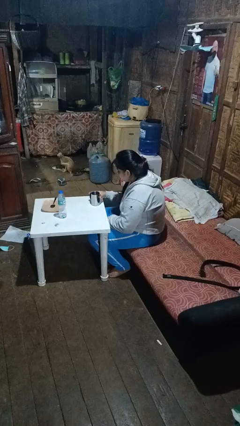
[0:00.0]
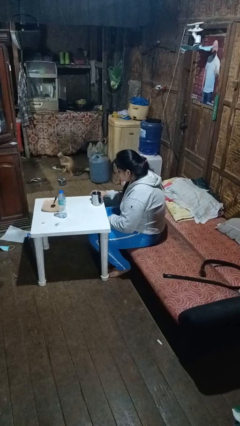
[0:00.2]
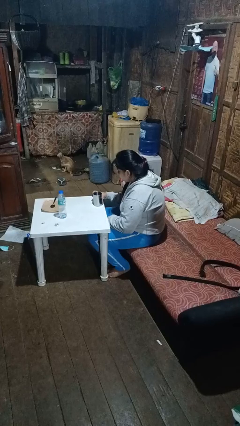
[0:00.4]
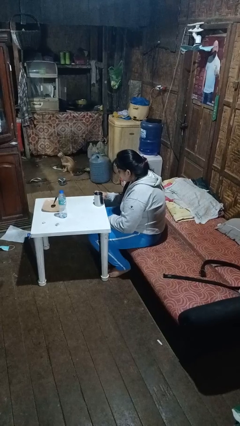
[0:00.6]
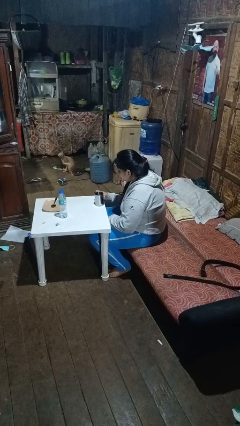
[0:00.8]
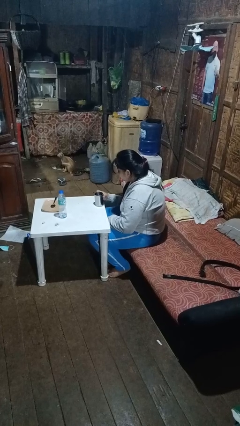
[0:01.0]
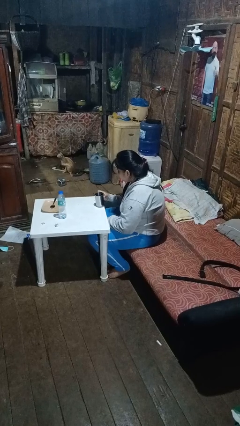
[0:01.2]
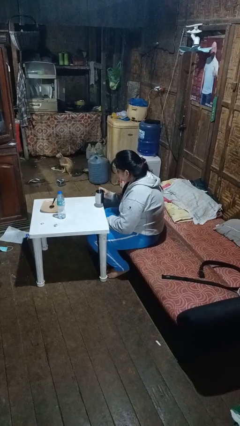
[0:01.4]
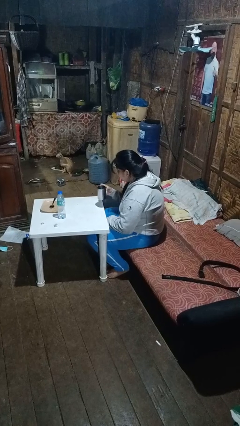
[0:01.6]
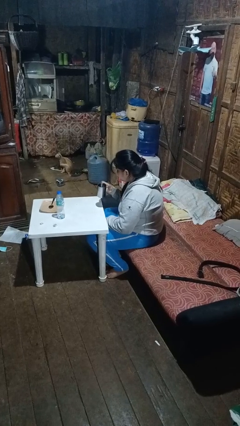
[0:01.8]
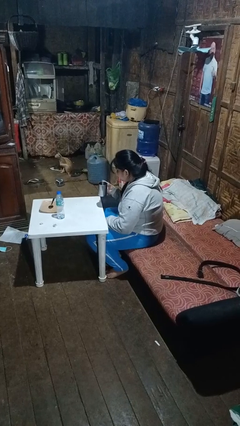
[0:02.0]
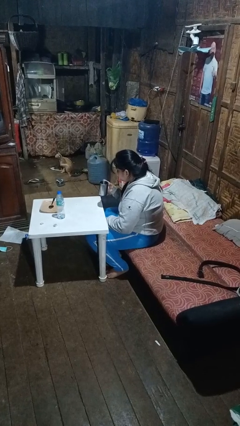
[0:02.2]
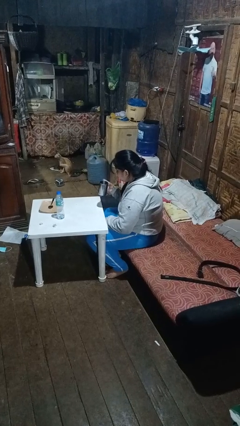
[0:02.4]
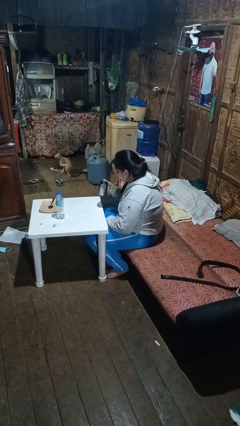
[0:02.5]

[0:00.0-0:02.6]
person picks up object from table

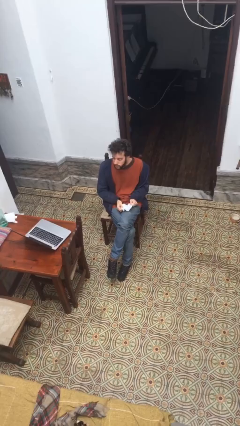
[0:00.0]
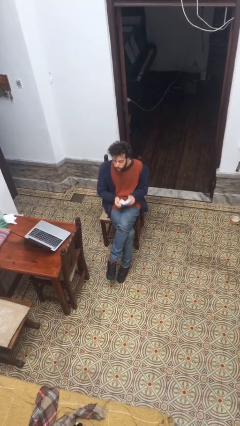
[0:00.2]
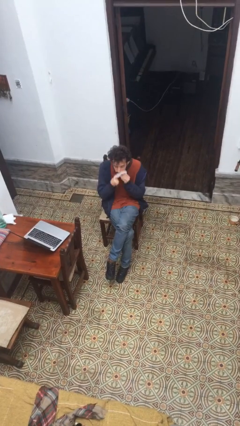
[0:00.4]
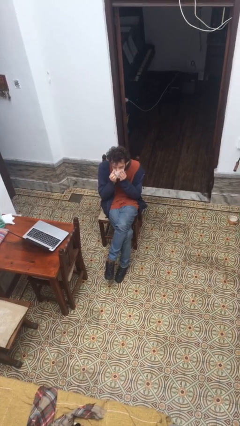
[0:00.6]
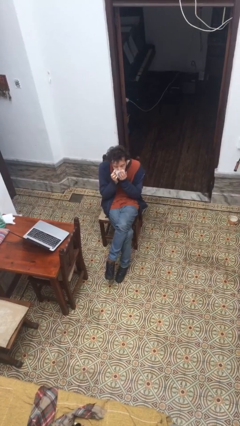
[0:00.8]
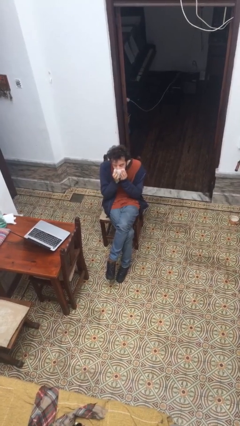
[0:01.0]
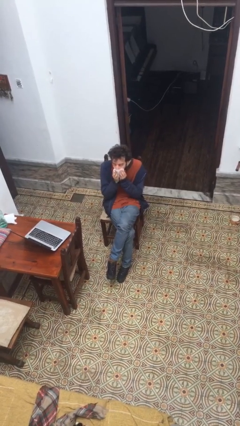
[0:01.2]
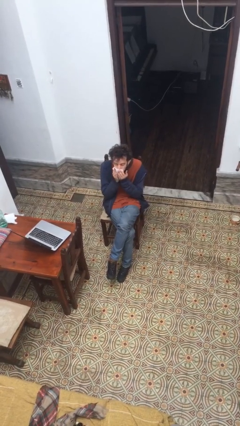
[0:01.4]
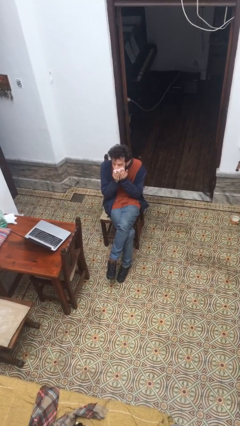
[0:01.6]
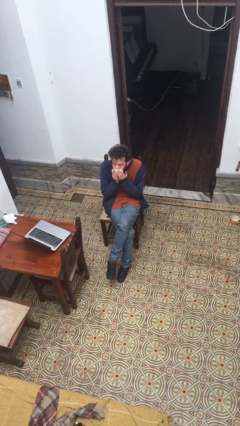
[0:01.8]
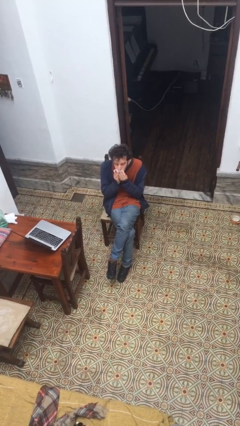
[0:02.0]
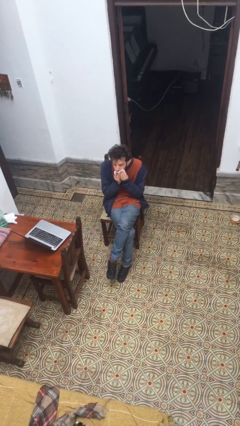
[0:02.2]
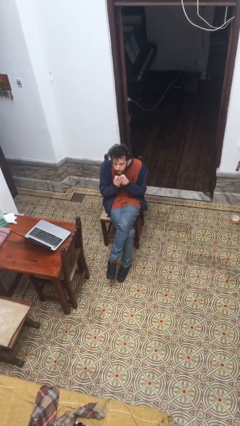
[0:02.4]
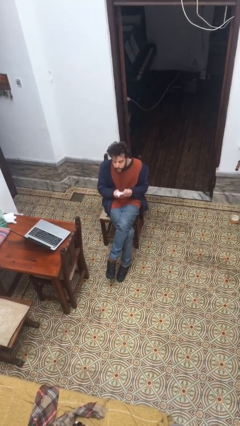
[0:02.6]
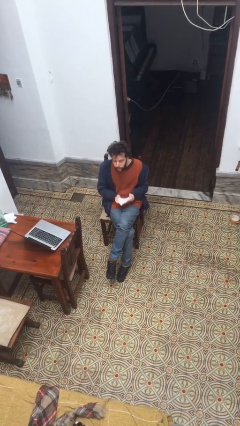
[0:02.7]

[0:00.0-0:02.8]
person wipes mouth with napkin

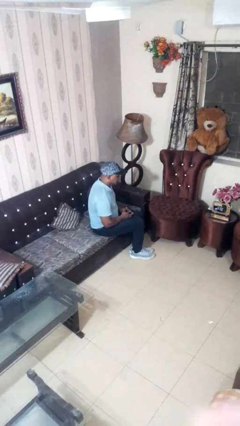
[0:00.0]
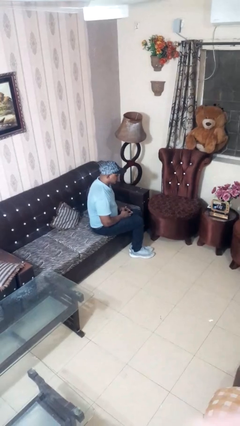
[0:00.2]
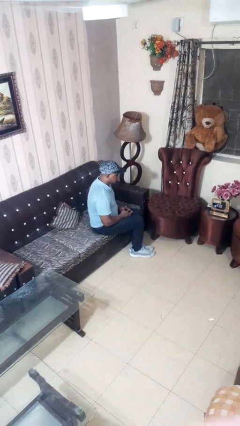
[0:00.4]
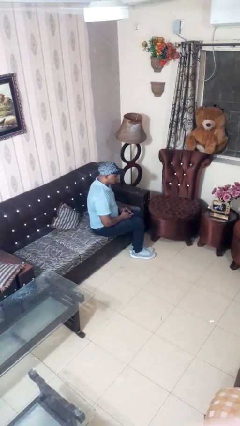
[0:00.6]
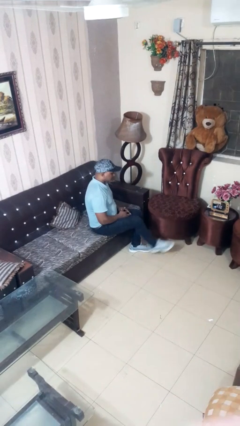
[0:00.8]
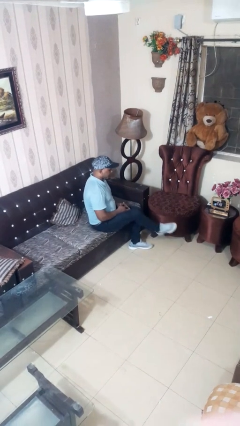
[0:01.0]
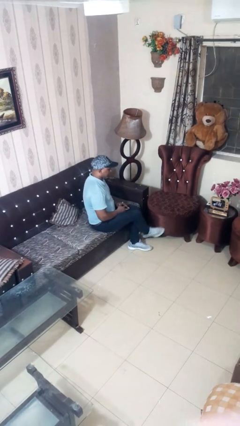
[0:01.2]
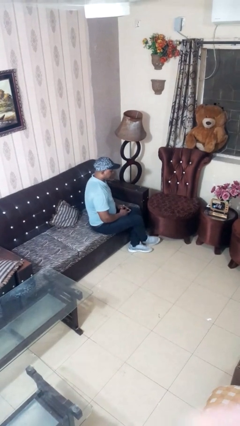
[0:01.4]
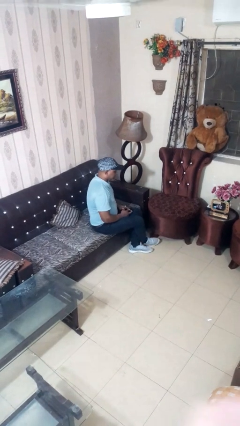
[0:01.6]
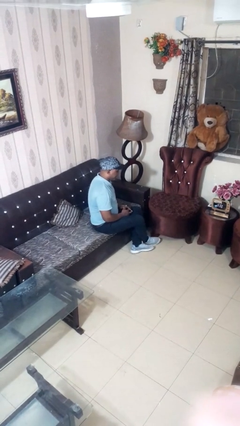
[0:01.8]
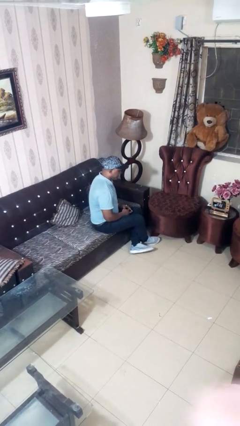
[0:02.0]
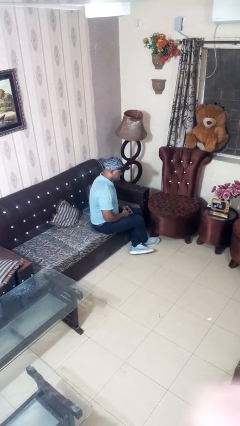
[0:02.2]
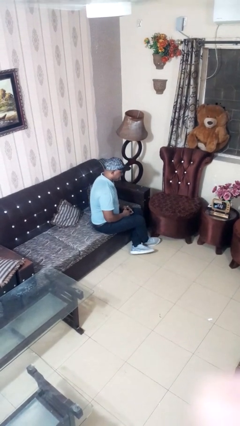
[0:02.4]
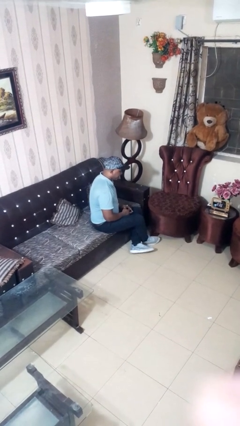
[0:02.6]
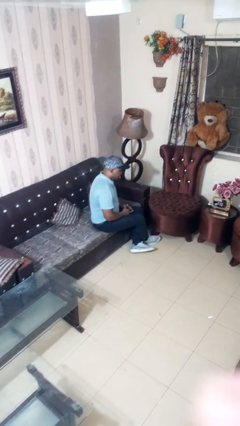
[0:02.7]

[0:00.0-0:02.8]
person crosses legs

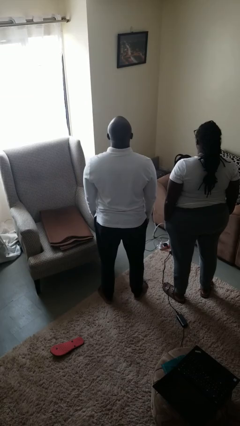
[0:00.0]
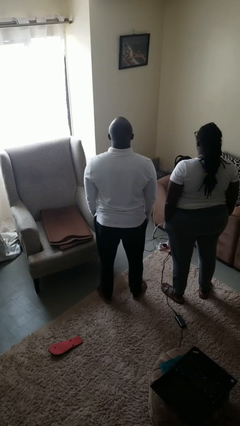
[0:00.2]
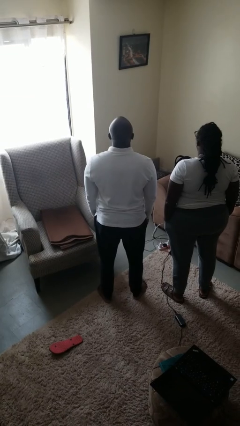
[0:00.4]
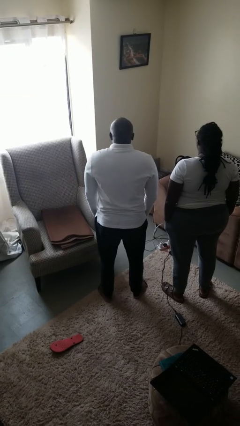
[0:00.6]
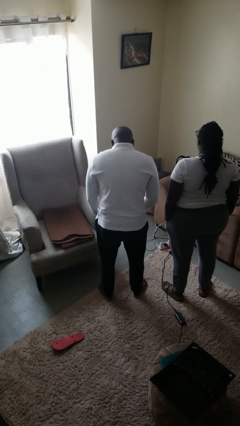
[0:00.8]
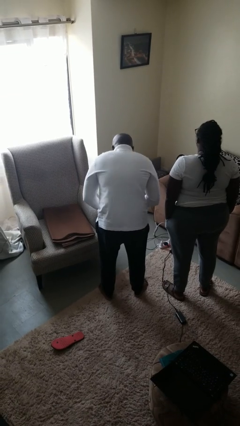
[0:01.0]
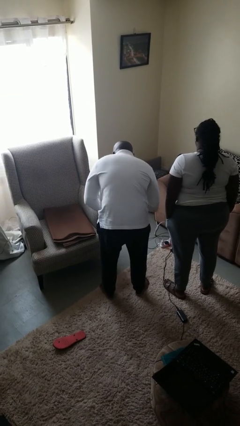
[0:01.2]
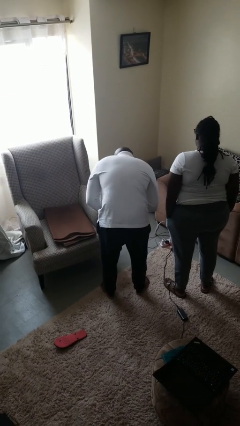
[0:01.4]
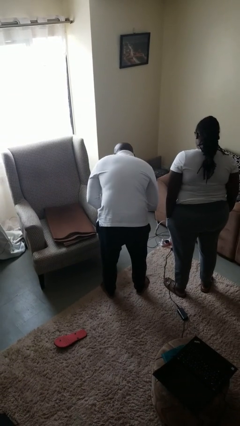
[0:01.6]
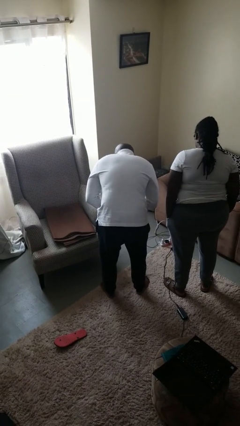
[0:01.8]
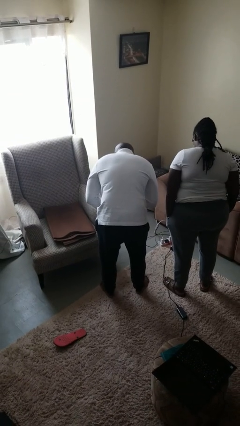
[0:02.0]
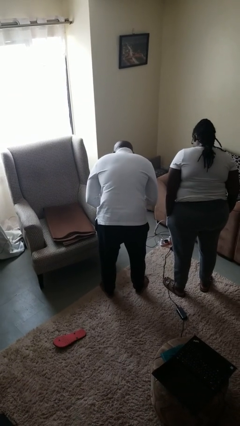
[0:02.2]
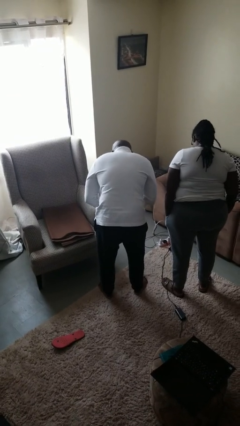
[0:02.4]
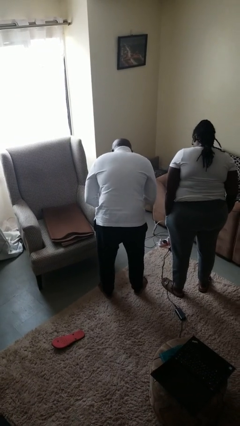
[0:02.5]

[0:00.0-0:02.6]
person laughs with person

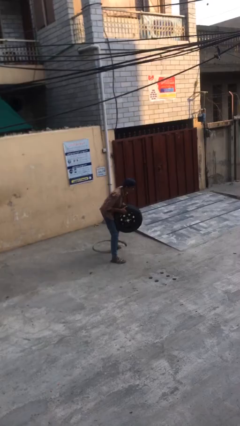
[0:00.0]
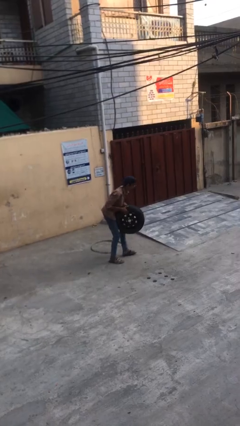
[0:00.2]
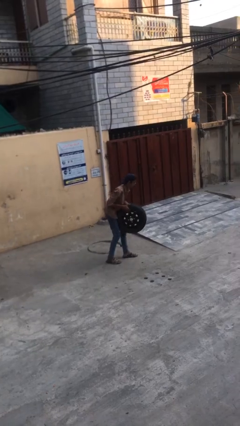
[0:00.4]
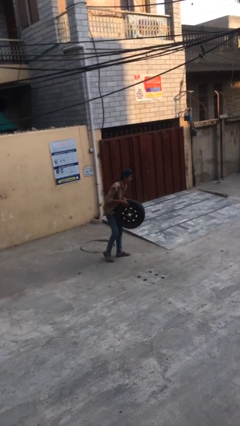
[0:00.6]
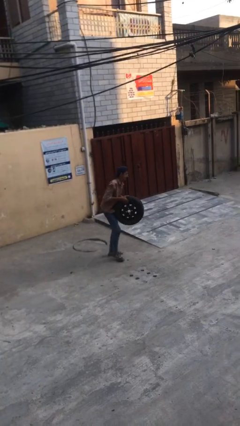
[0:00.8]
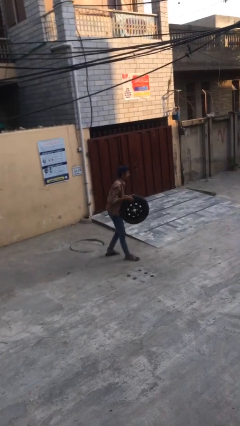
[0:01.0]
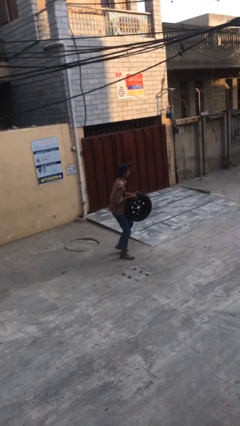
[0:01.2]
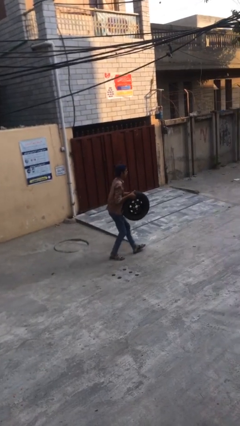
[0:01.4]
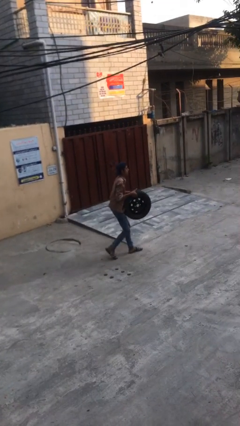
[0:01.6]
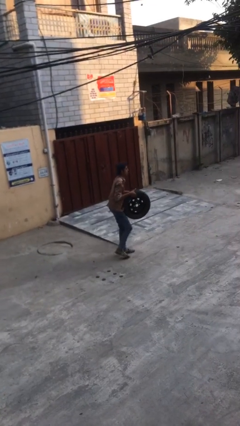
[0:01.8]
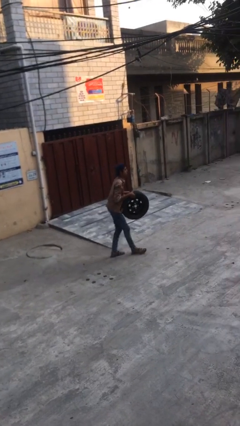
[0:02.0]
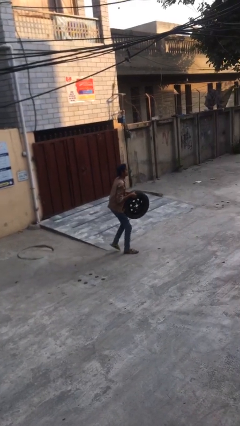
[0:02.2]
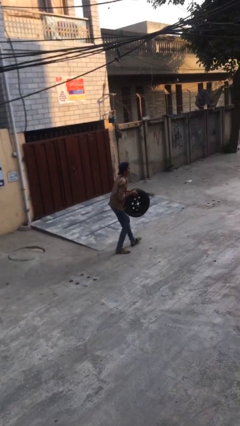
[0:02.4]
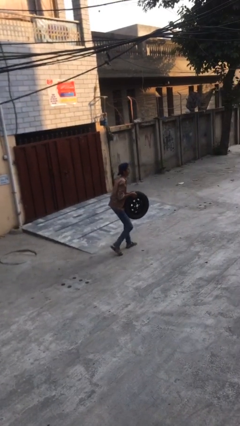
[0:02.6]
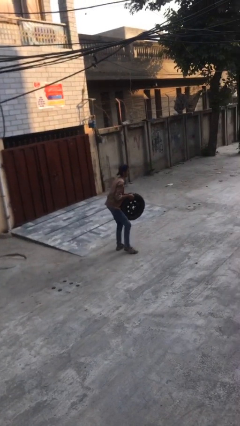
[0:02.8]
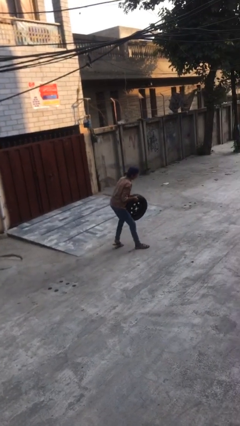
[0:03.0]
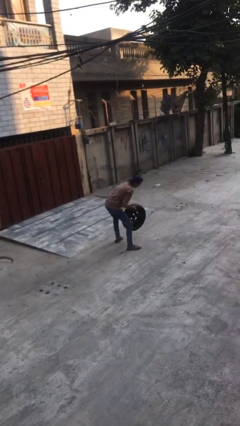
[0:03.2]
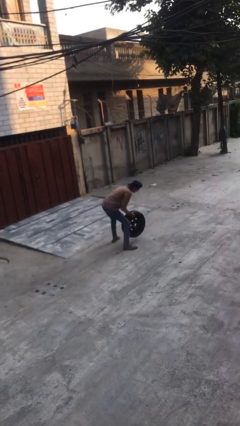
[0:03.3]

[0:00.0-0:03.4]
person carries heavy object

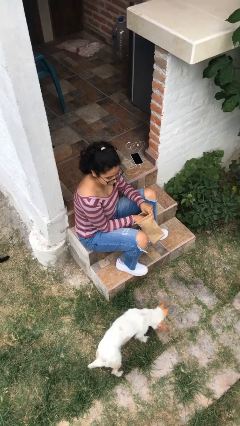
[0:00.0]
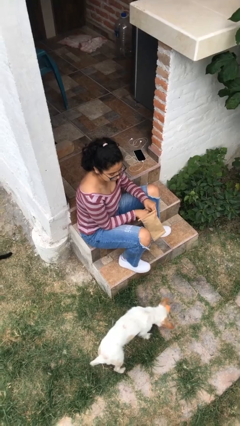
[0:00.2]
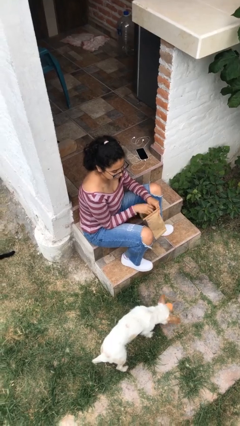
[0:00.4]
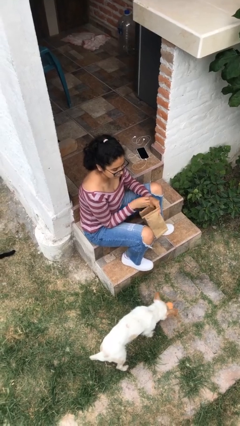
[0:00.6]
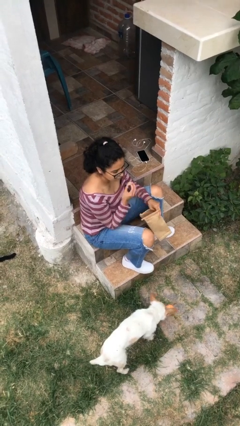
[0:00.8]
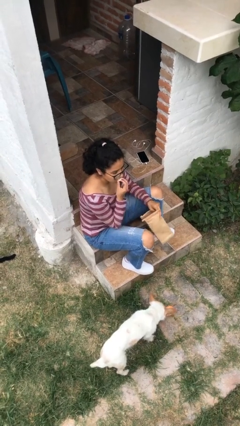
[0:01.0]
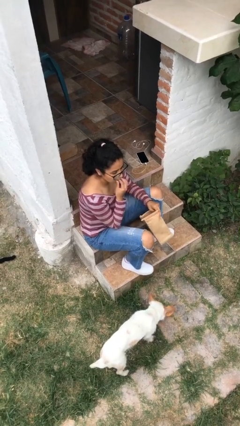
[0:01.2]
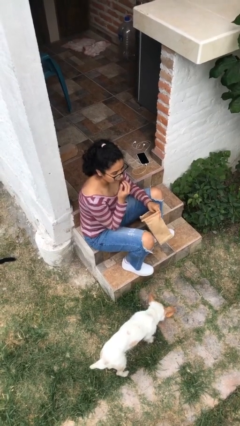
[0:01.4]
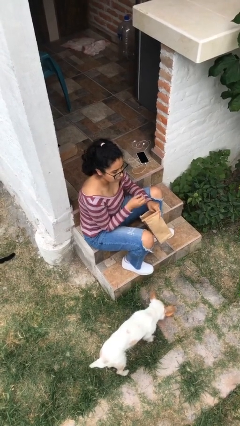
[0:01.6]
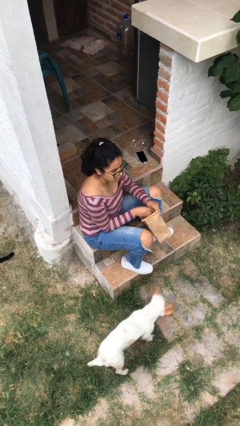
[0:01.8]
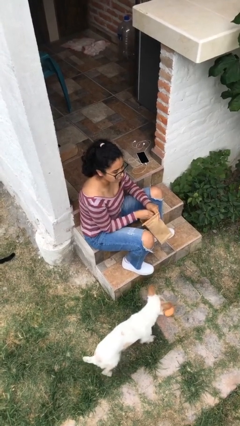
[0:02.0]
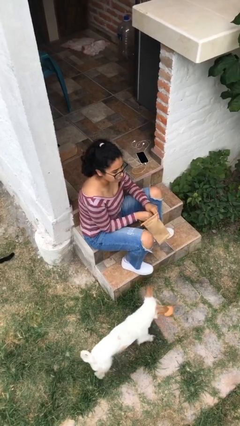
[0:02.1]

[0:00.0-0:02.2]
person eats snack from bag

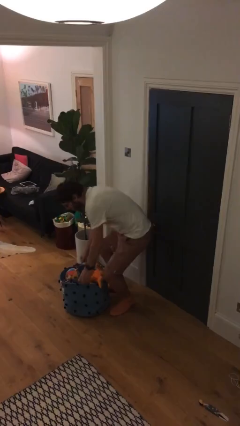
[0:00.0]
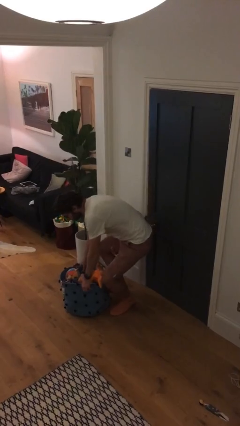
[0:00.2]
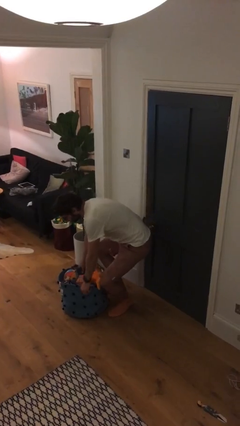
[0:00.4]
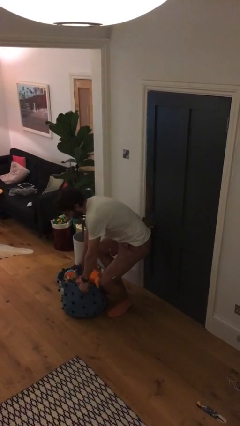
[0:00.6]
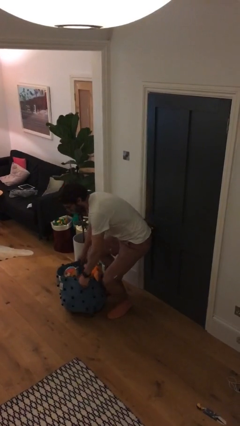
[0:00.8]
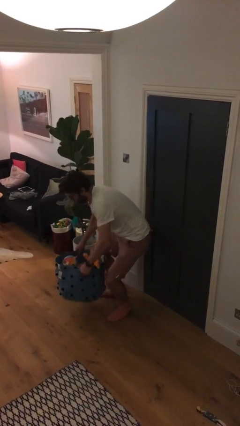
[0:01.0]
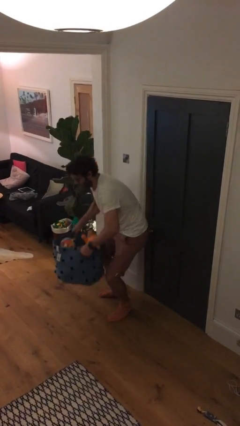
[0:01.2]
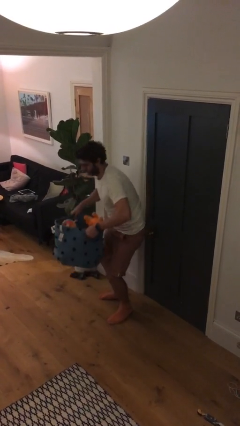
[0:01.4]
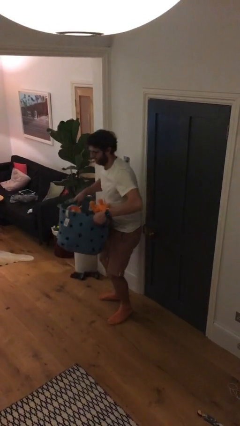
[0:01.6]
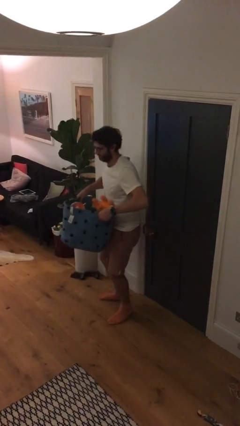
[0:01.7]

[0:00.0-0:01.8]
person picks up object from floor
